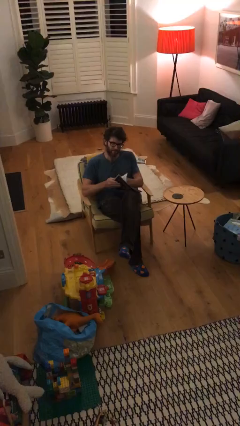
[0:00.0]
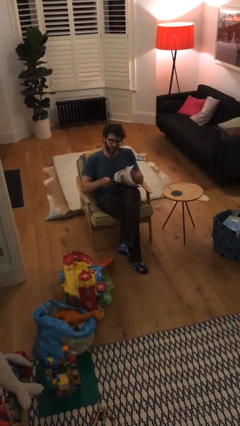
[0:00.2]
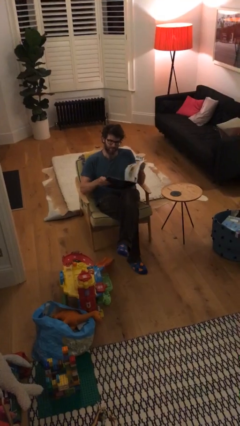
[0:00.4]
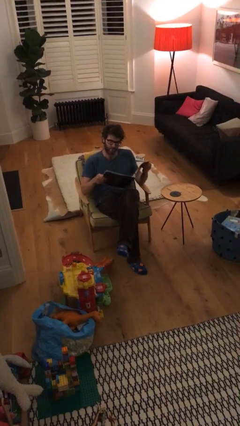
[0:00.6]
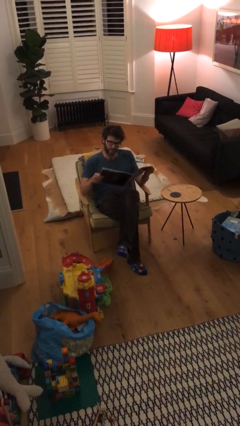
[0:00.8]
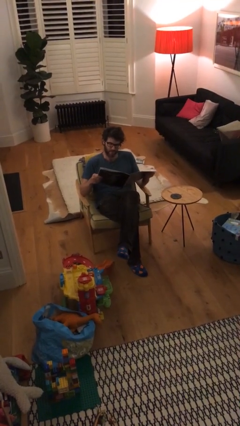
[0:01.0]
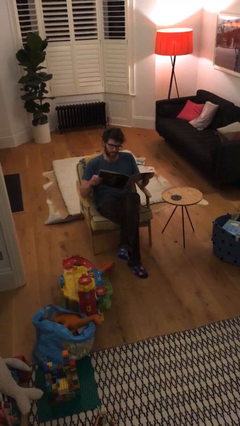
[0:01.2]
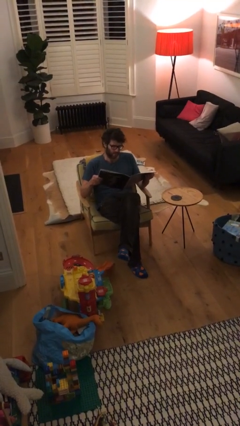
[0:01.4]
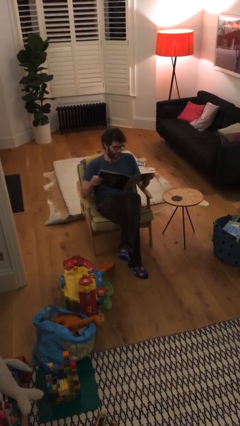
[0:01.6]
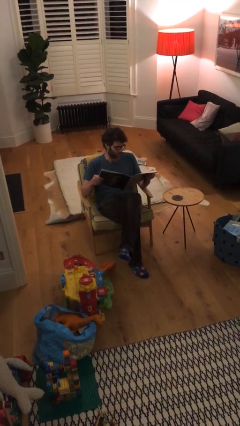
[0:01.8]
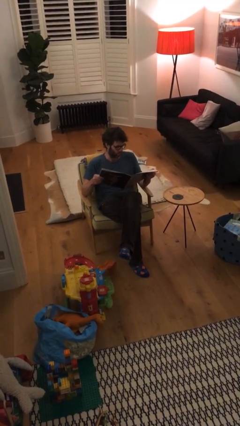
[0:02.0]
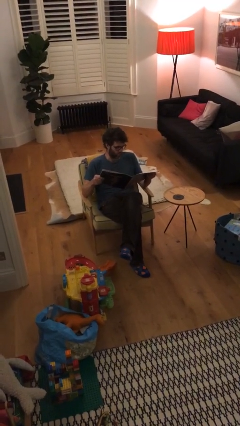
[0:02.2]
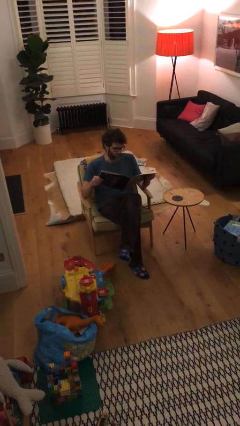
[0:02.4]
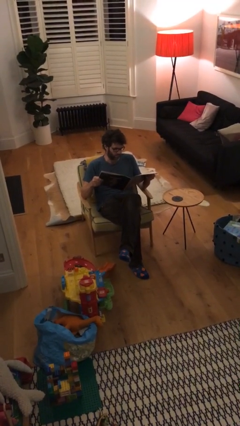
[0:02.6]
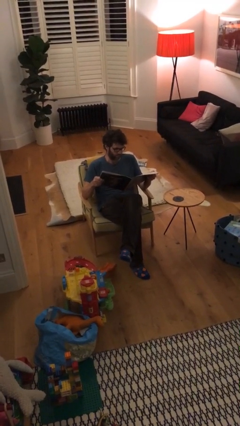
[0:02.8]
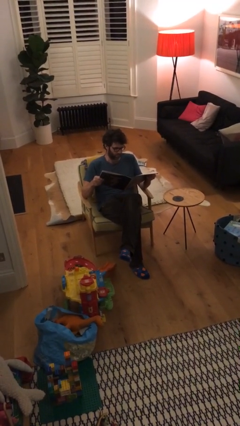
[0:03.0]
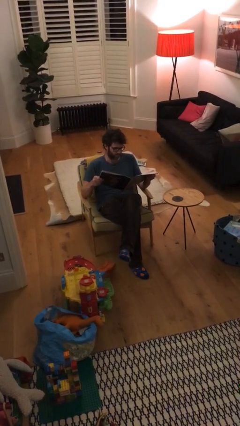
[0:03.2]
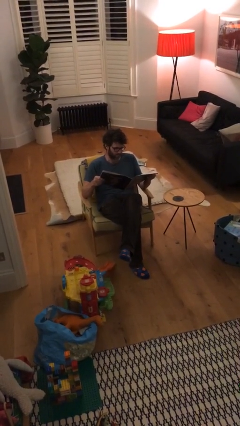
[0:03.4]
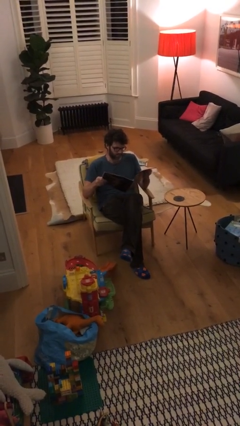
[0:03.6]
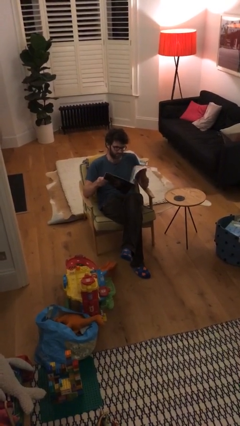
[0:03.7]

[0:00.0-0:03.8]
person reads document

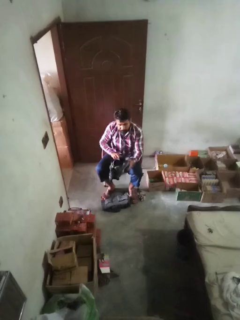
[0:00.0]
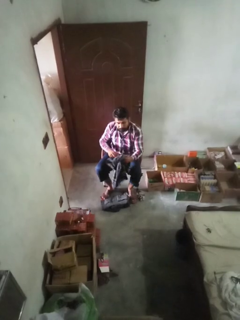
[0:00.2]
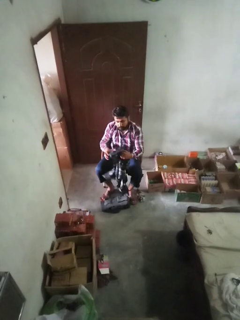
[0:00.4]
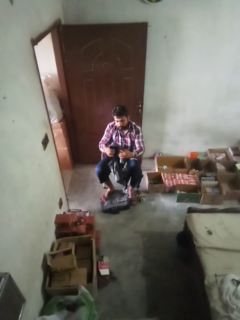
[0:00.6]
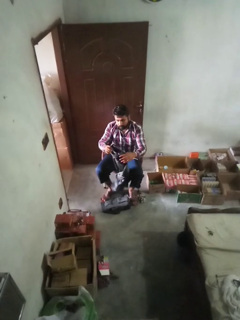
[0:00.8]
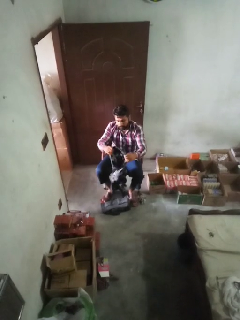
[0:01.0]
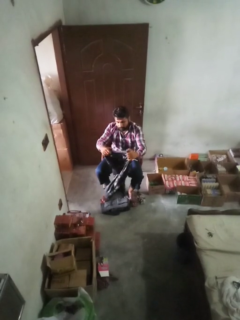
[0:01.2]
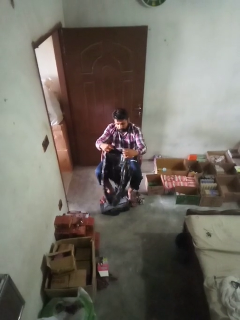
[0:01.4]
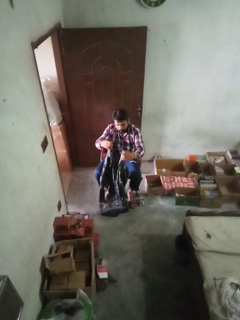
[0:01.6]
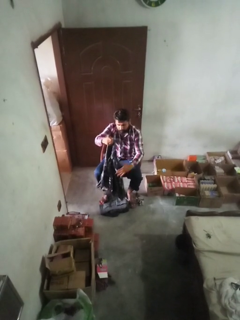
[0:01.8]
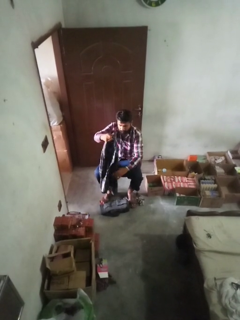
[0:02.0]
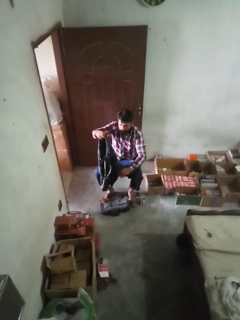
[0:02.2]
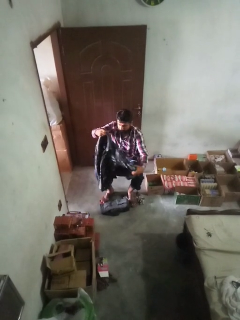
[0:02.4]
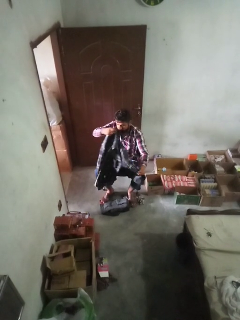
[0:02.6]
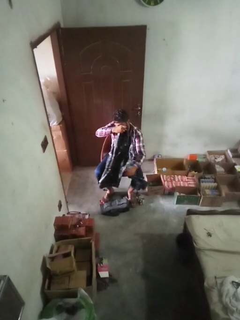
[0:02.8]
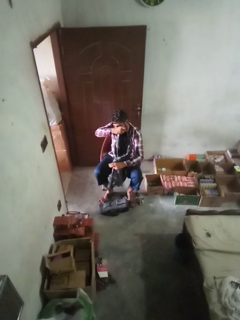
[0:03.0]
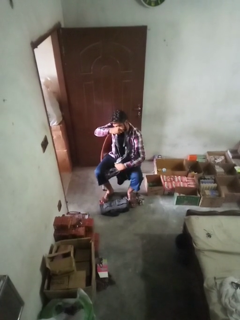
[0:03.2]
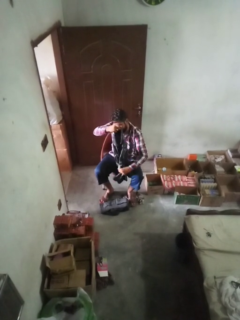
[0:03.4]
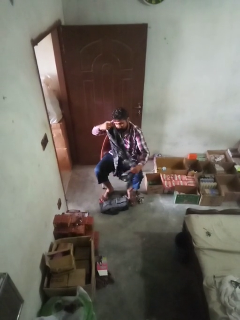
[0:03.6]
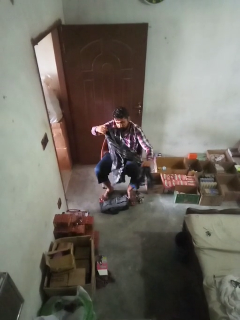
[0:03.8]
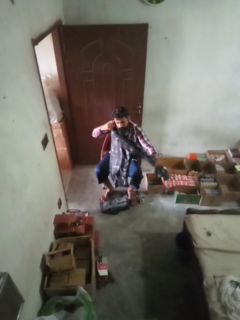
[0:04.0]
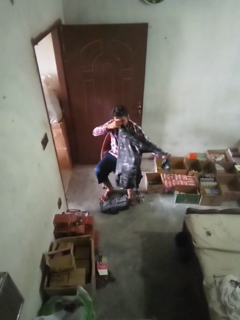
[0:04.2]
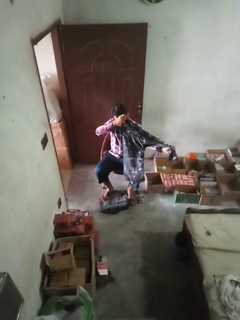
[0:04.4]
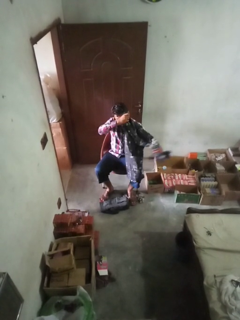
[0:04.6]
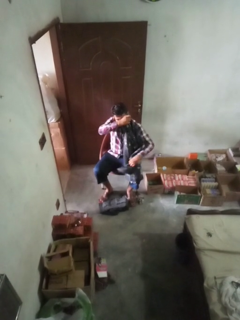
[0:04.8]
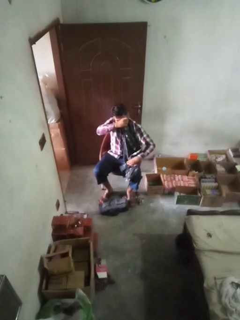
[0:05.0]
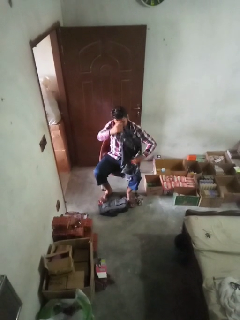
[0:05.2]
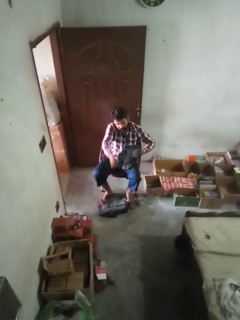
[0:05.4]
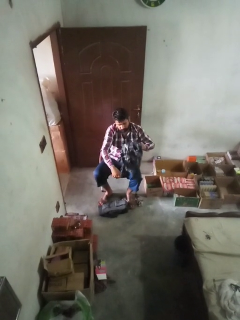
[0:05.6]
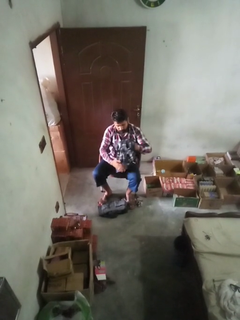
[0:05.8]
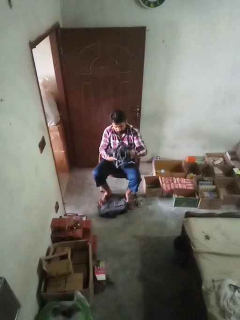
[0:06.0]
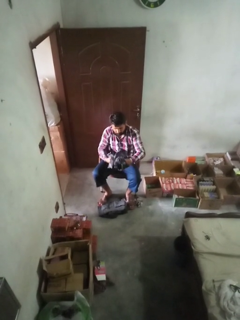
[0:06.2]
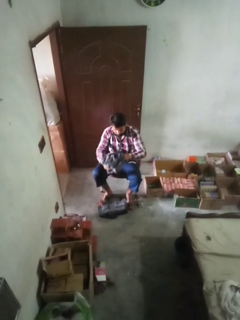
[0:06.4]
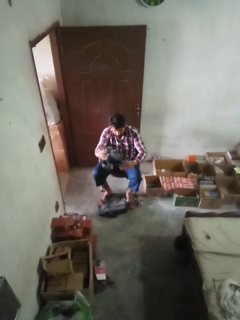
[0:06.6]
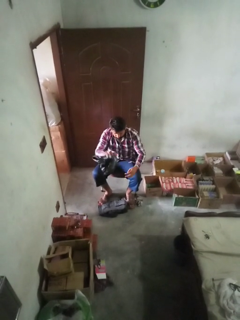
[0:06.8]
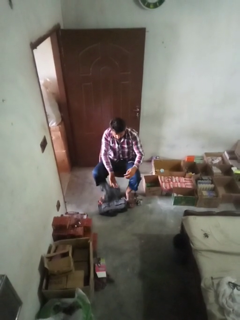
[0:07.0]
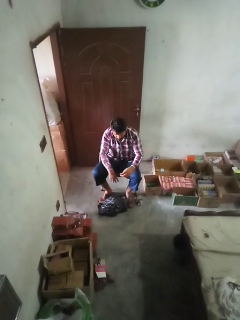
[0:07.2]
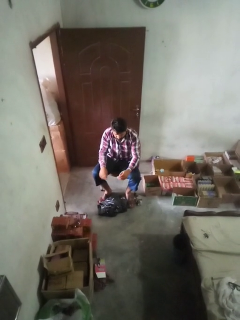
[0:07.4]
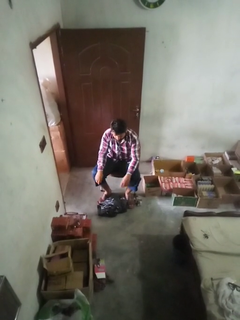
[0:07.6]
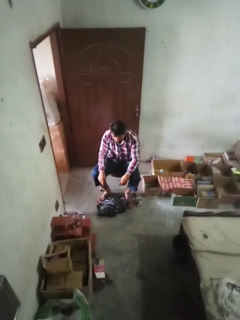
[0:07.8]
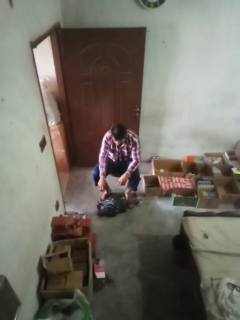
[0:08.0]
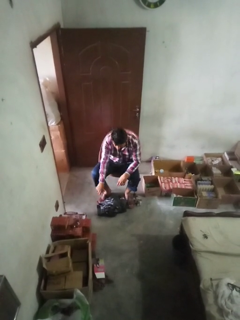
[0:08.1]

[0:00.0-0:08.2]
person folds shirt

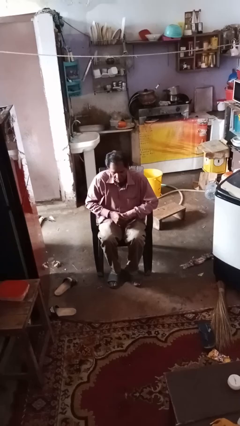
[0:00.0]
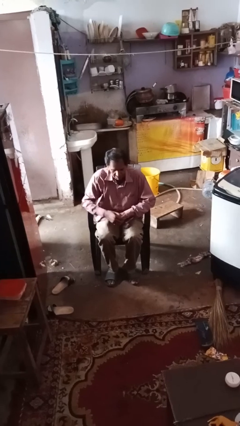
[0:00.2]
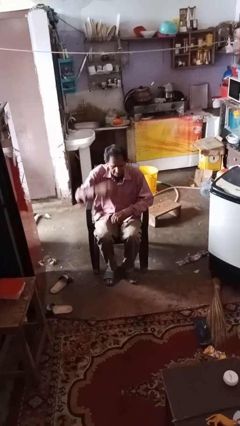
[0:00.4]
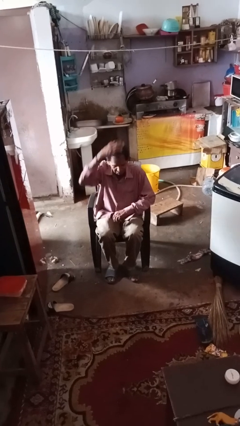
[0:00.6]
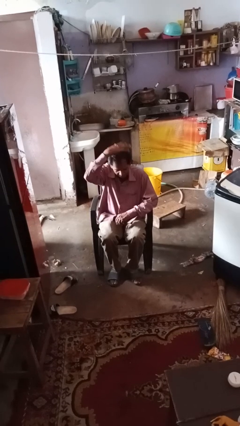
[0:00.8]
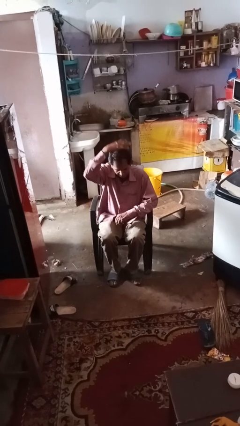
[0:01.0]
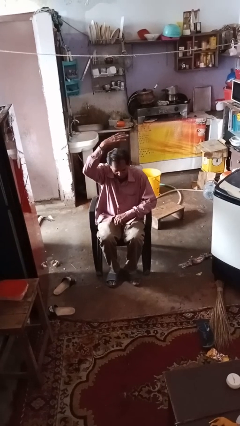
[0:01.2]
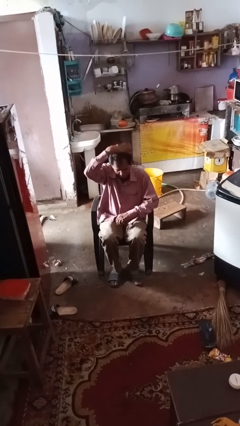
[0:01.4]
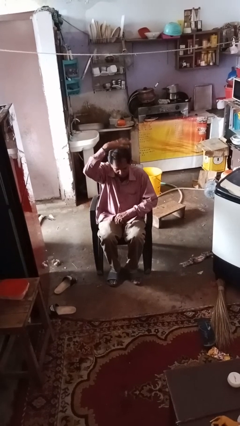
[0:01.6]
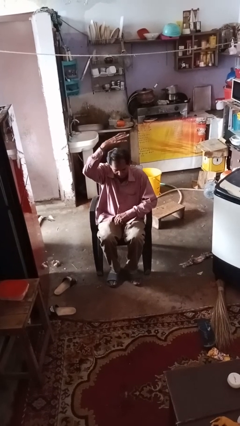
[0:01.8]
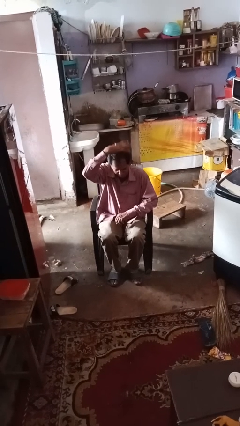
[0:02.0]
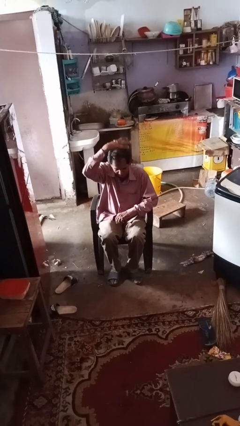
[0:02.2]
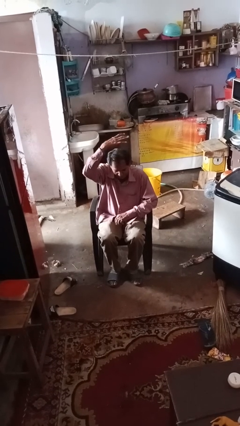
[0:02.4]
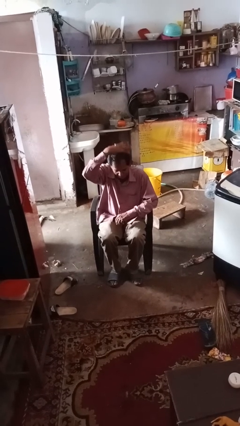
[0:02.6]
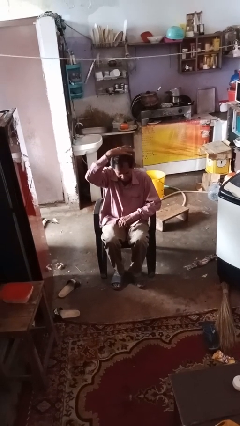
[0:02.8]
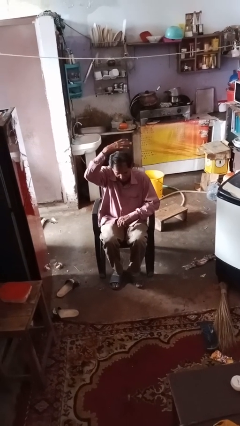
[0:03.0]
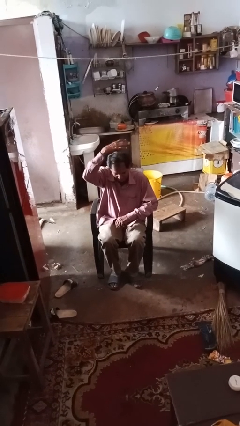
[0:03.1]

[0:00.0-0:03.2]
person holds object above head

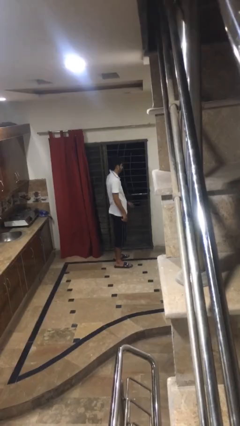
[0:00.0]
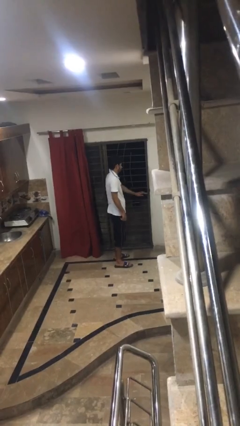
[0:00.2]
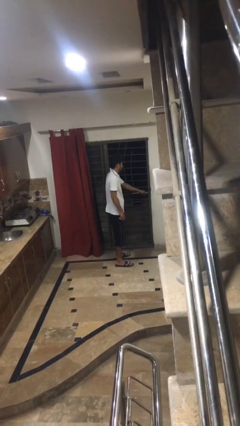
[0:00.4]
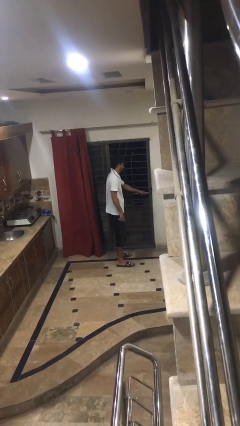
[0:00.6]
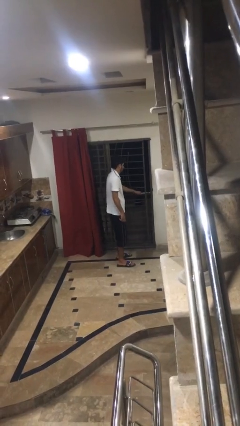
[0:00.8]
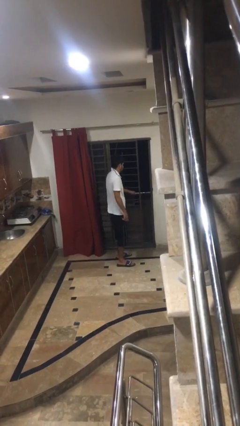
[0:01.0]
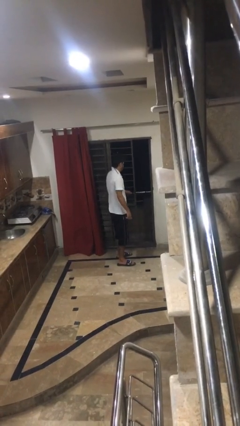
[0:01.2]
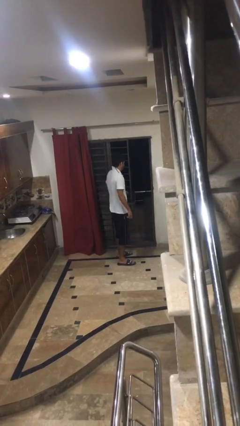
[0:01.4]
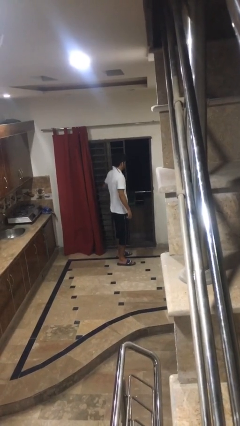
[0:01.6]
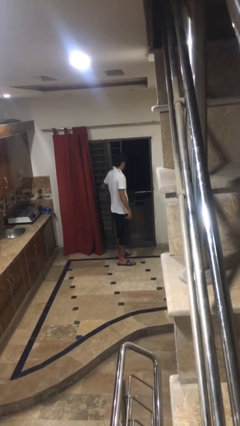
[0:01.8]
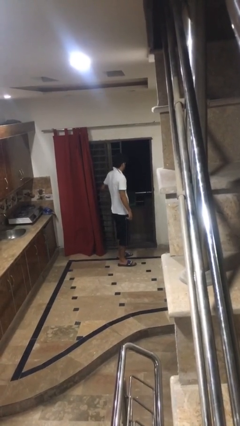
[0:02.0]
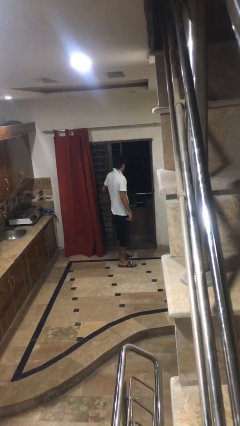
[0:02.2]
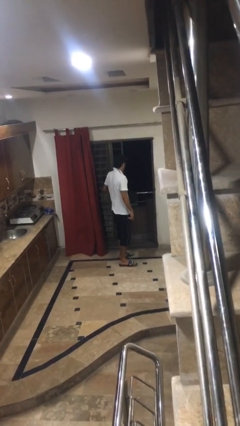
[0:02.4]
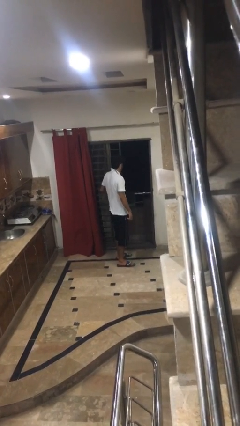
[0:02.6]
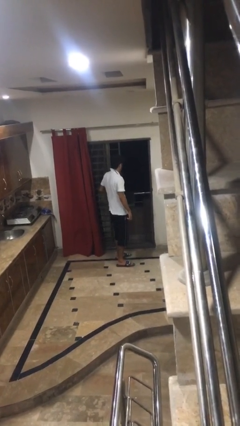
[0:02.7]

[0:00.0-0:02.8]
person opens facility door

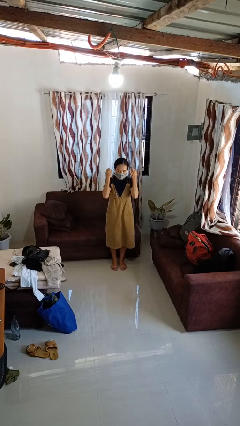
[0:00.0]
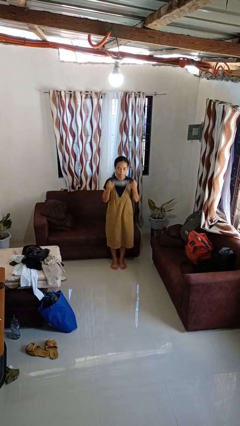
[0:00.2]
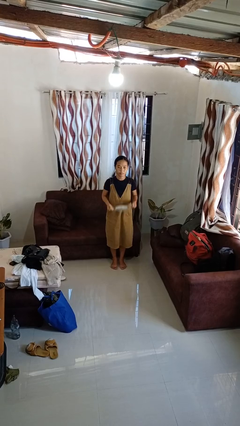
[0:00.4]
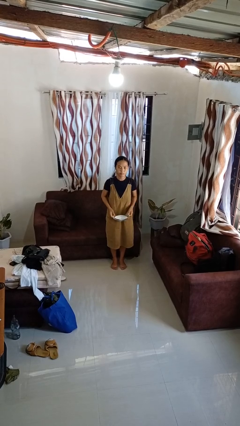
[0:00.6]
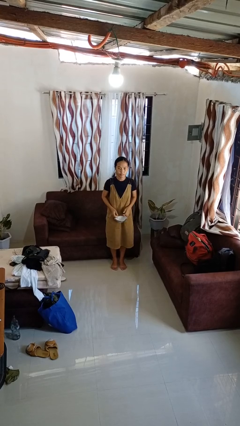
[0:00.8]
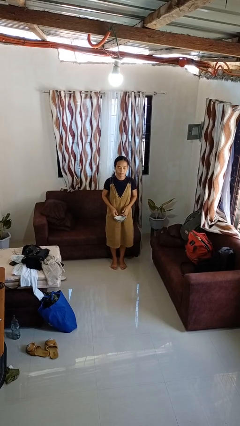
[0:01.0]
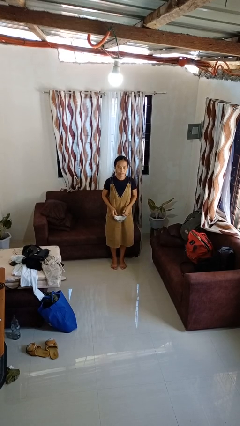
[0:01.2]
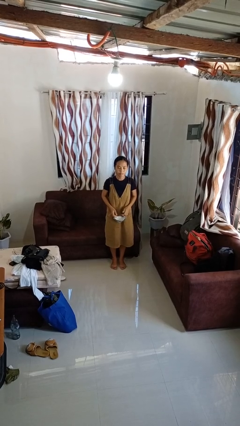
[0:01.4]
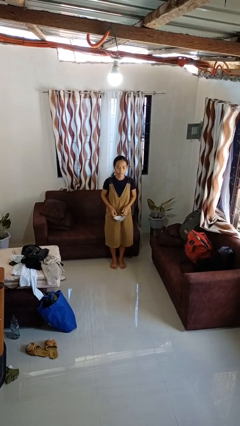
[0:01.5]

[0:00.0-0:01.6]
person takes off facemask

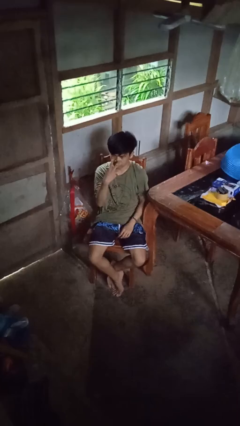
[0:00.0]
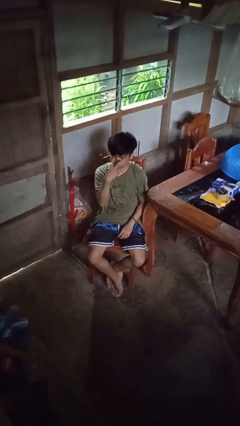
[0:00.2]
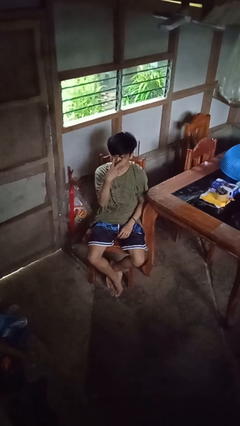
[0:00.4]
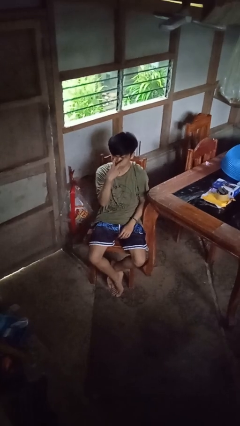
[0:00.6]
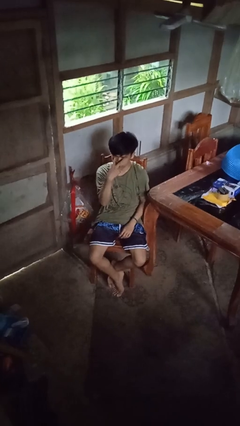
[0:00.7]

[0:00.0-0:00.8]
person gestures watch closely
